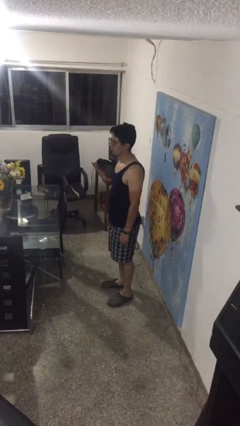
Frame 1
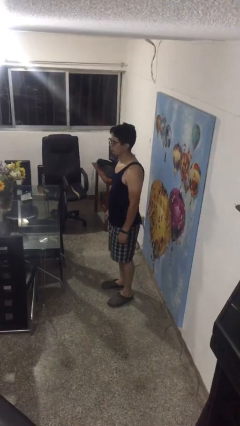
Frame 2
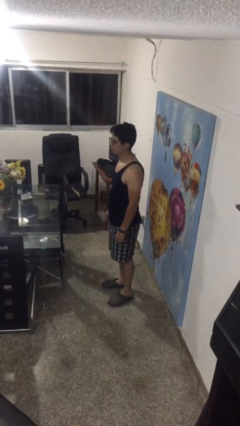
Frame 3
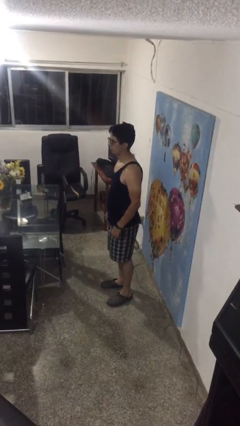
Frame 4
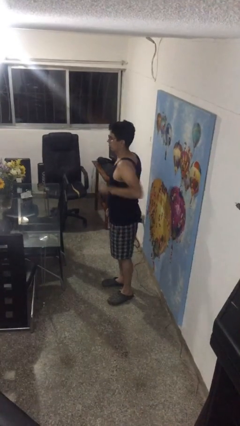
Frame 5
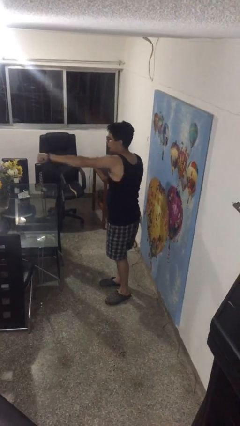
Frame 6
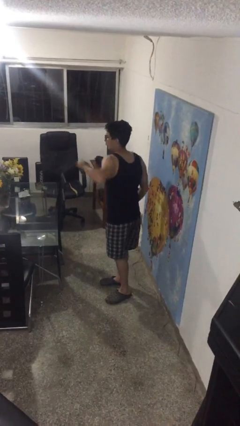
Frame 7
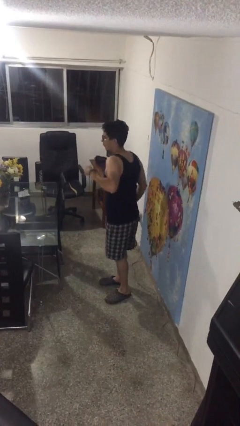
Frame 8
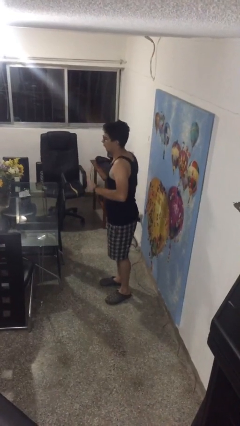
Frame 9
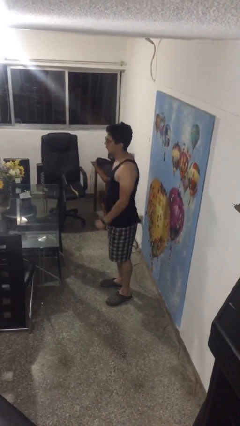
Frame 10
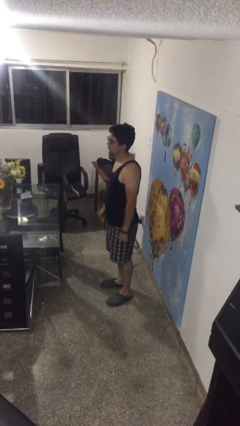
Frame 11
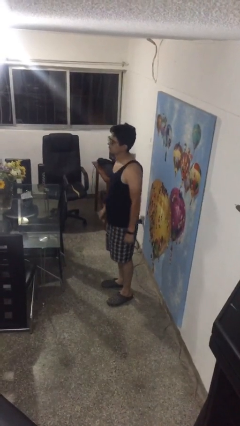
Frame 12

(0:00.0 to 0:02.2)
person punches

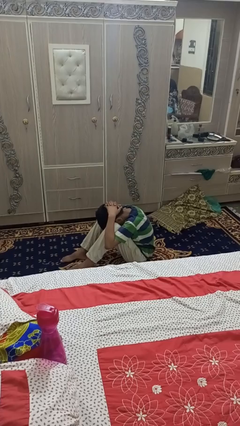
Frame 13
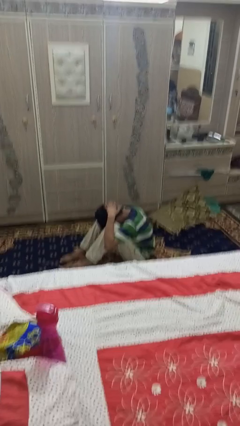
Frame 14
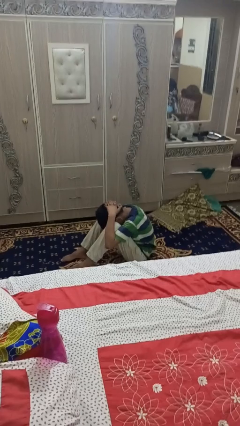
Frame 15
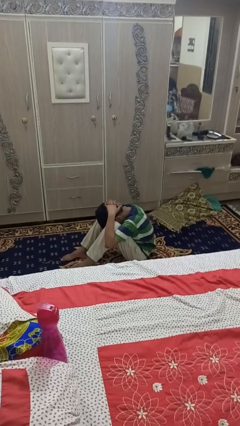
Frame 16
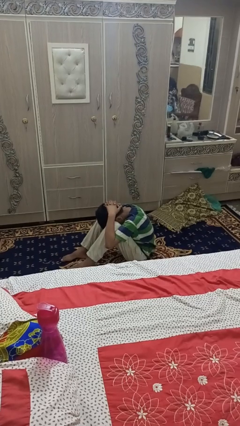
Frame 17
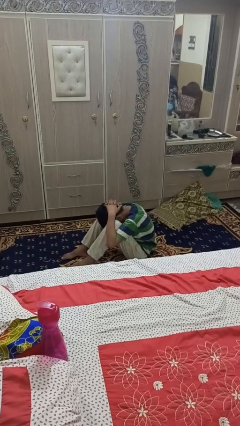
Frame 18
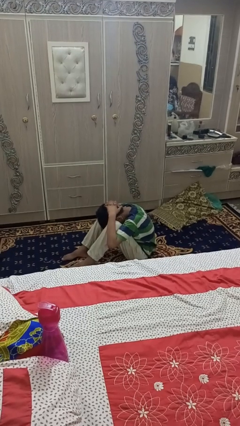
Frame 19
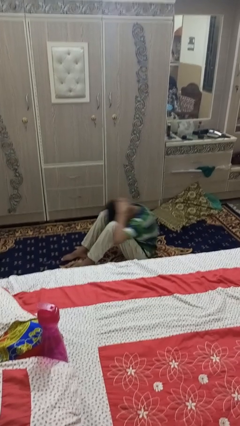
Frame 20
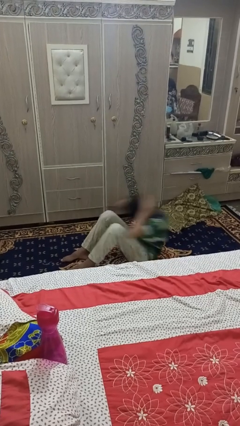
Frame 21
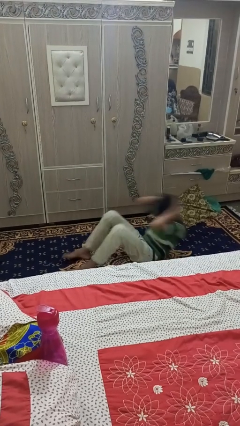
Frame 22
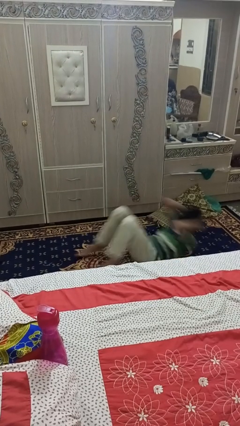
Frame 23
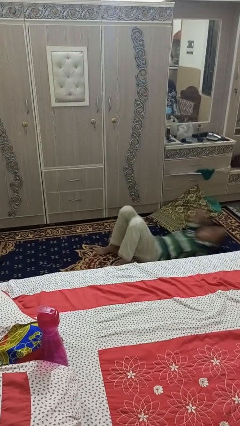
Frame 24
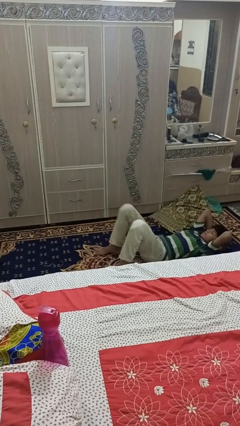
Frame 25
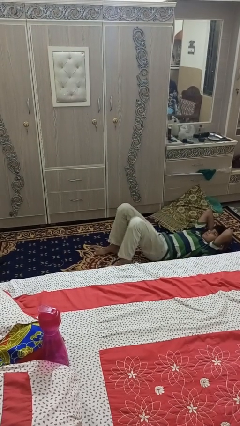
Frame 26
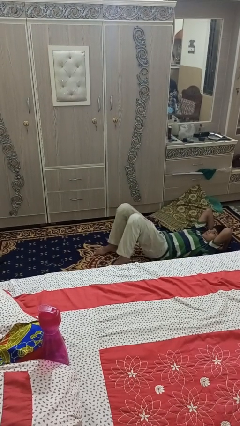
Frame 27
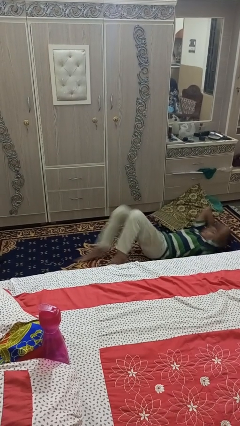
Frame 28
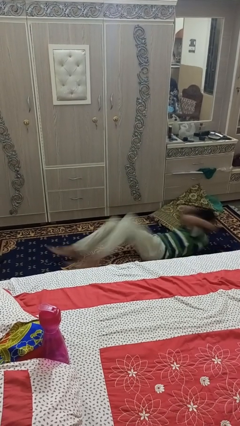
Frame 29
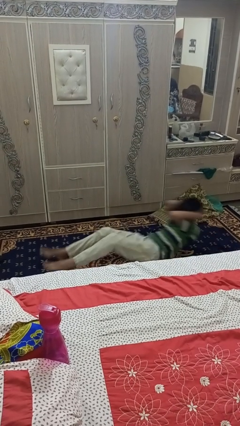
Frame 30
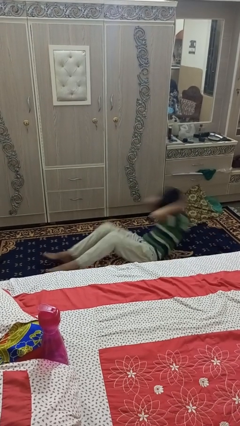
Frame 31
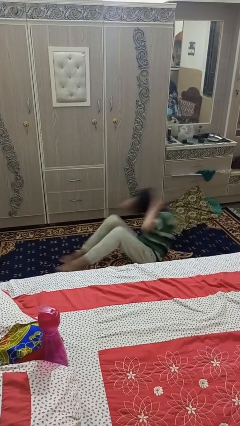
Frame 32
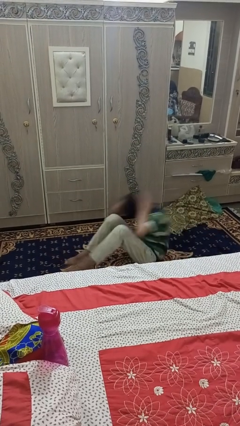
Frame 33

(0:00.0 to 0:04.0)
person exercises with situp

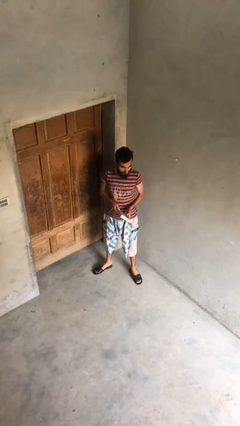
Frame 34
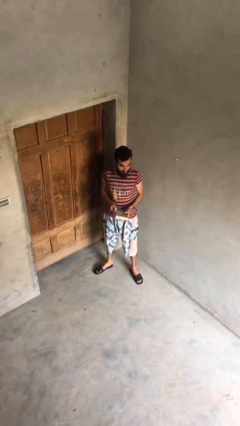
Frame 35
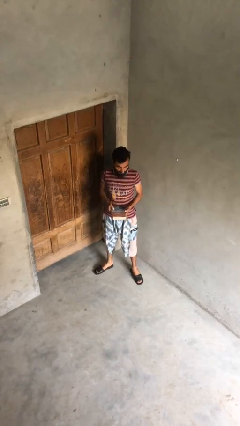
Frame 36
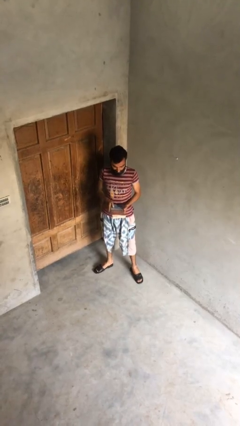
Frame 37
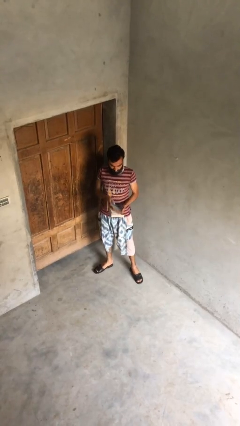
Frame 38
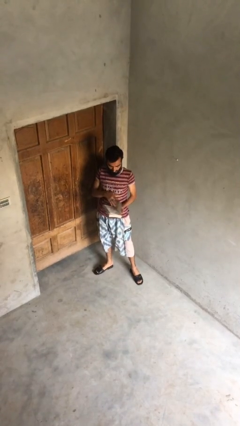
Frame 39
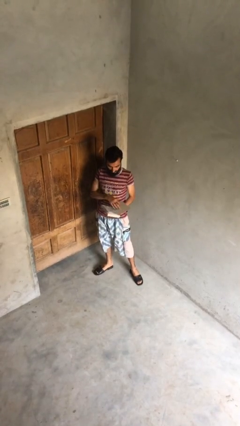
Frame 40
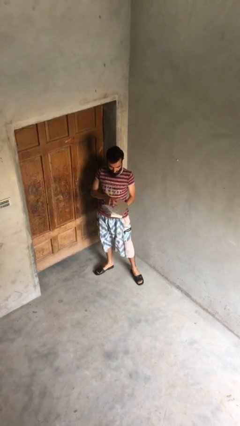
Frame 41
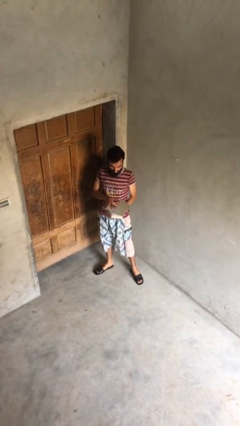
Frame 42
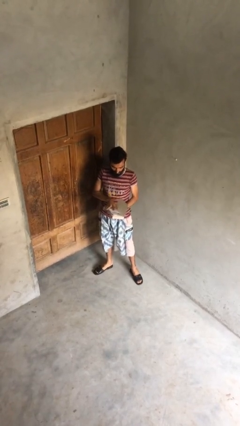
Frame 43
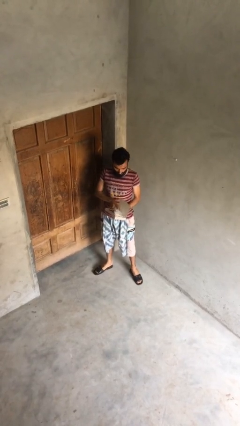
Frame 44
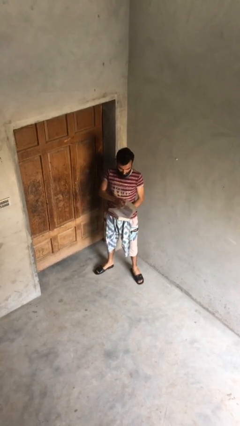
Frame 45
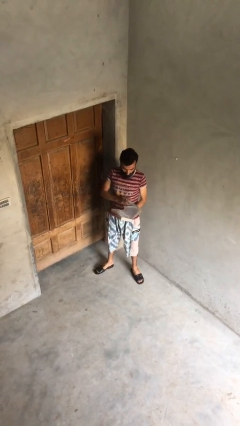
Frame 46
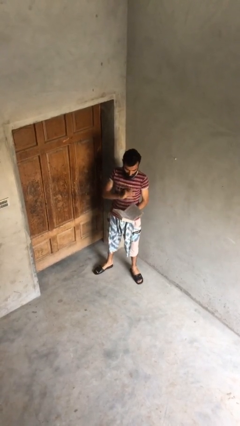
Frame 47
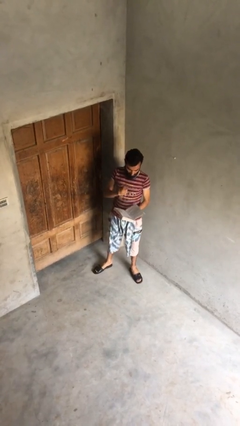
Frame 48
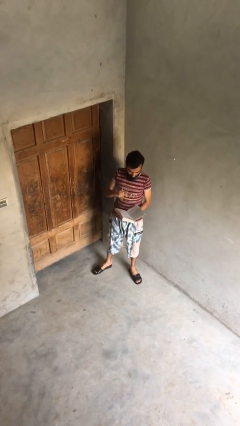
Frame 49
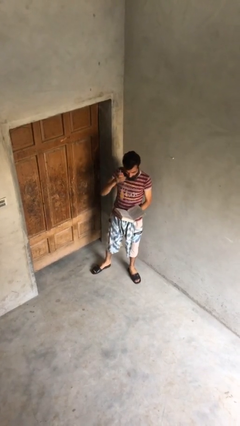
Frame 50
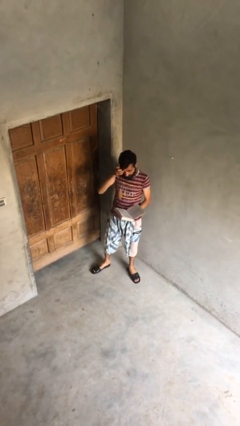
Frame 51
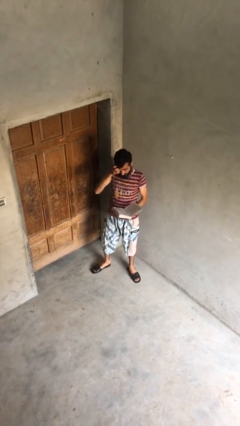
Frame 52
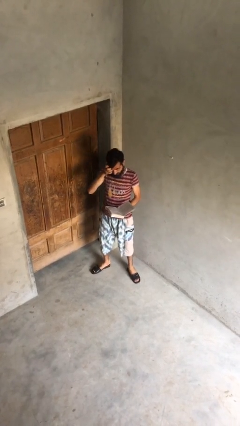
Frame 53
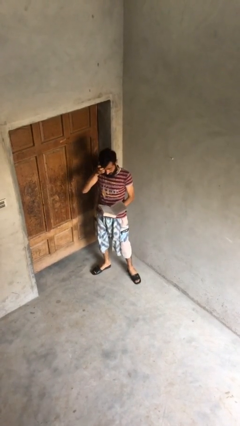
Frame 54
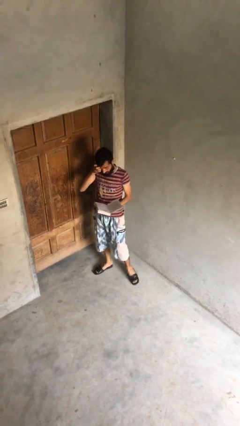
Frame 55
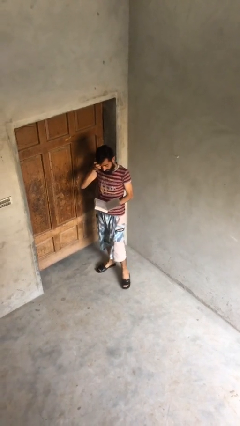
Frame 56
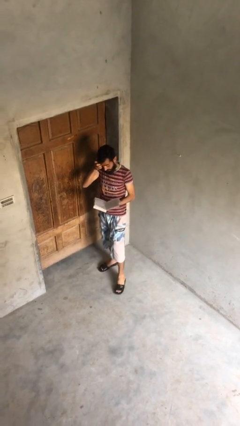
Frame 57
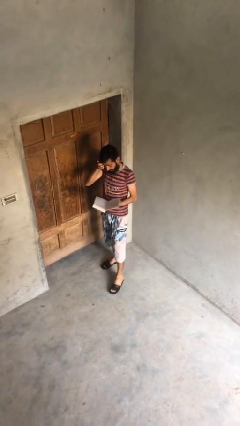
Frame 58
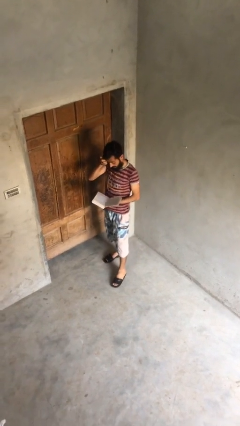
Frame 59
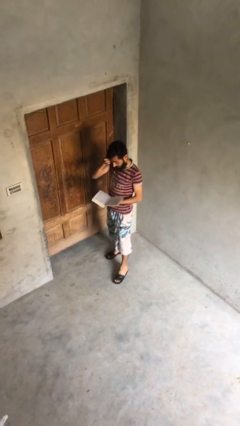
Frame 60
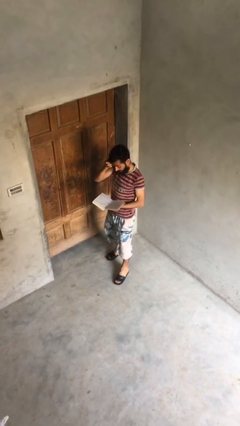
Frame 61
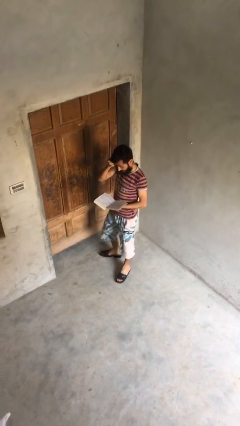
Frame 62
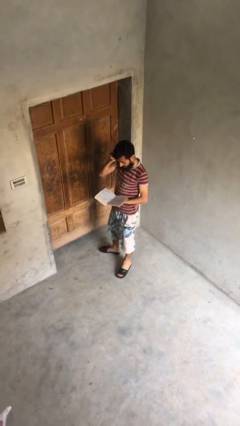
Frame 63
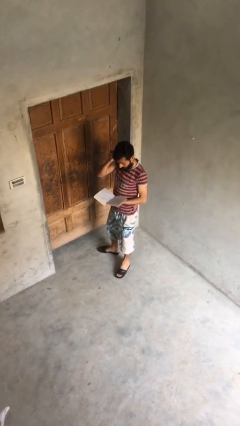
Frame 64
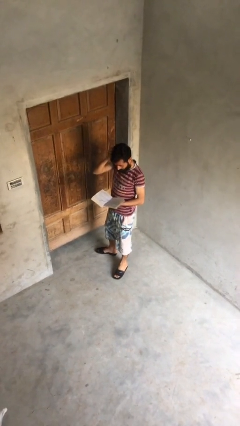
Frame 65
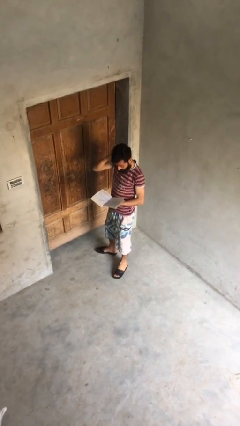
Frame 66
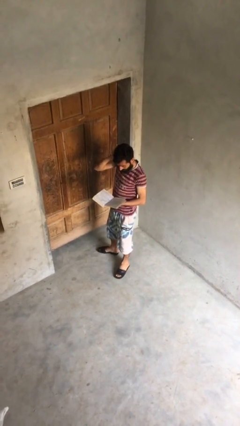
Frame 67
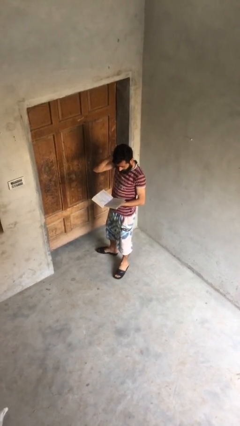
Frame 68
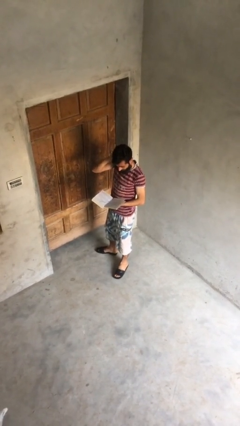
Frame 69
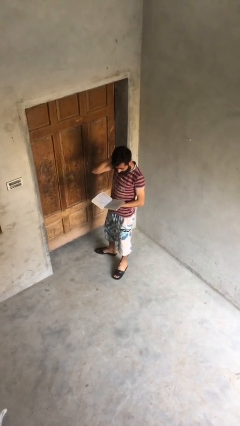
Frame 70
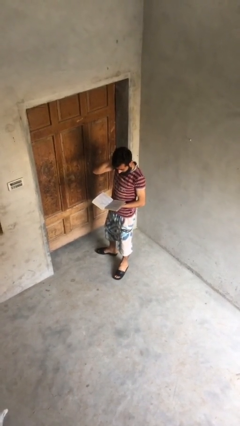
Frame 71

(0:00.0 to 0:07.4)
person reads document

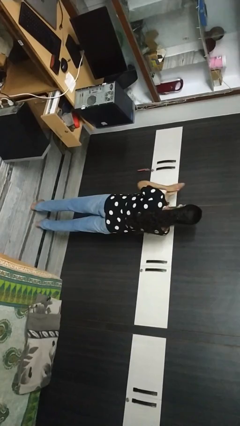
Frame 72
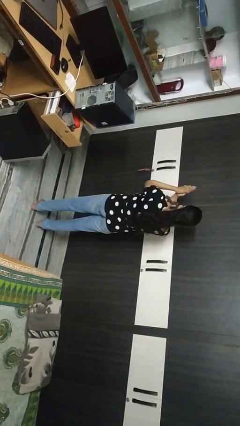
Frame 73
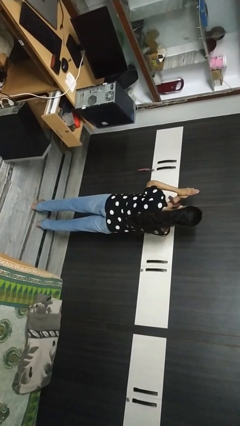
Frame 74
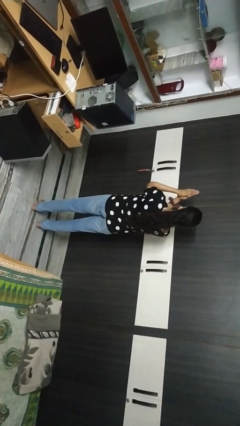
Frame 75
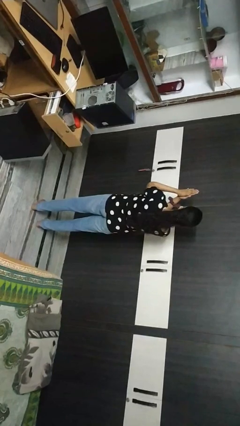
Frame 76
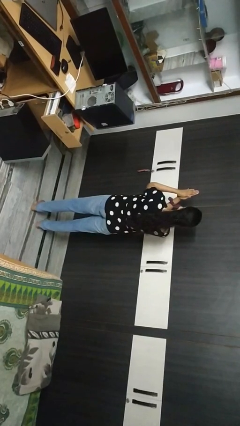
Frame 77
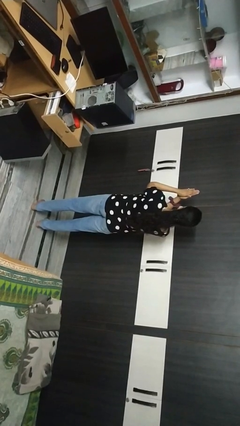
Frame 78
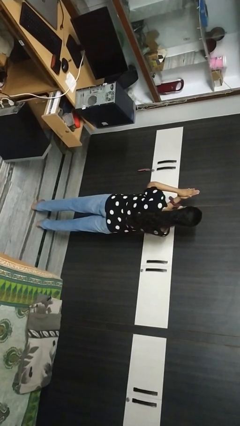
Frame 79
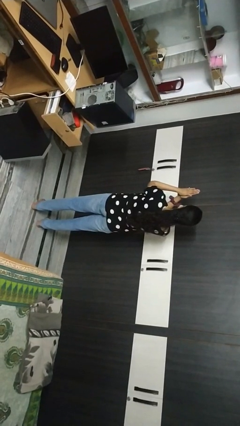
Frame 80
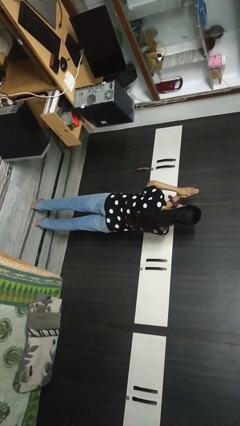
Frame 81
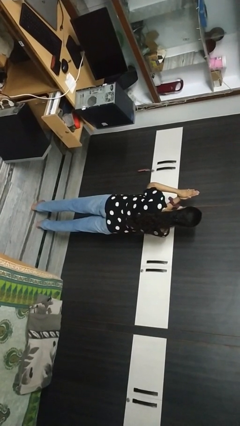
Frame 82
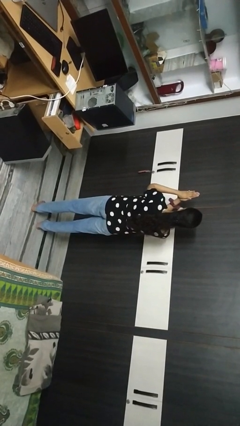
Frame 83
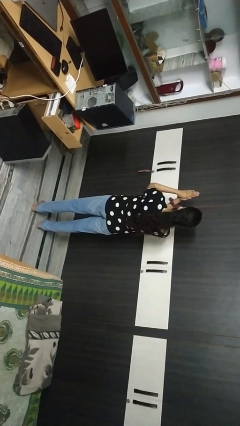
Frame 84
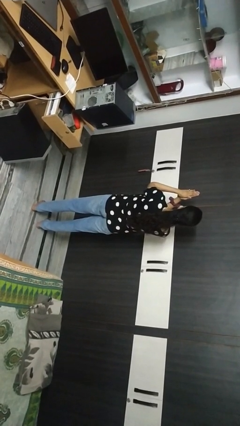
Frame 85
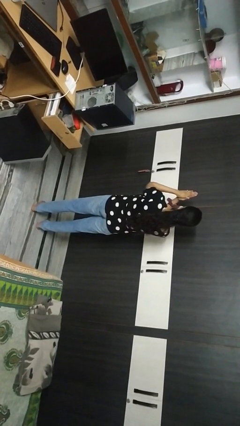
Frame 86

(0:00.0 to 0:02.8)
person prays

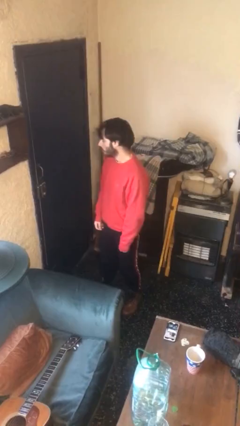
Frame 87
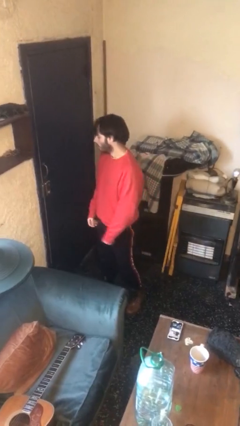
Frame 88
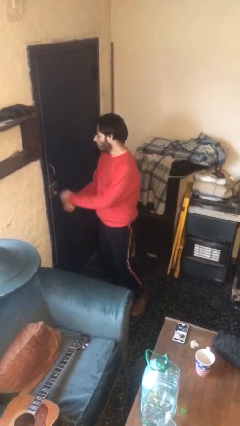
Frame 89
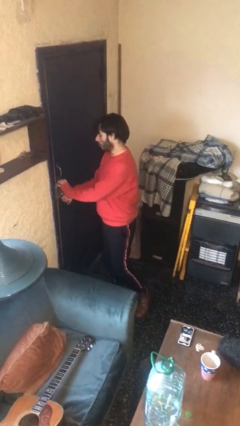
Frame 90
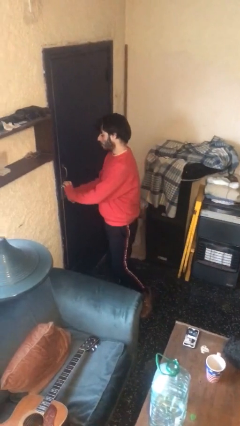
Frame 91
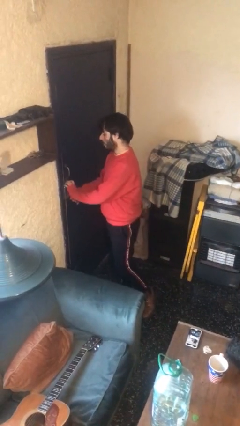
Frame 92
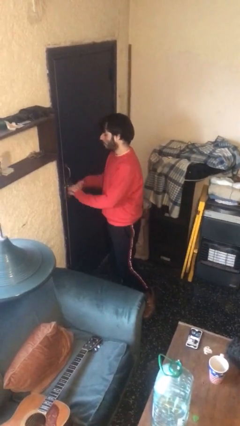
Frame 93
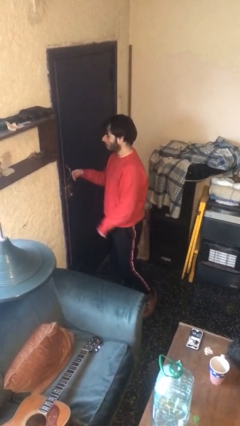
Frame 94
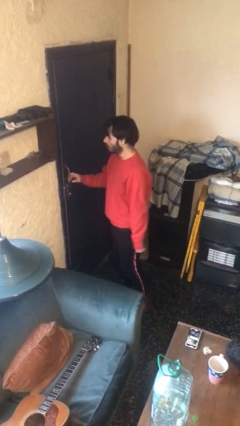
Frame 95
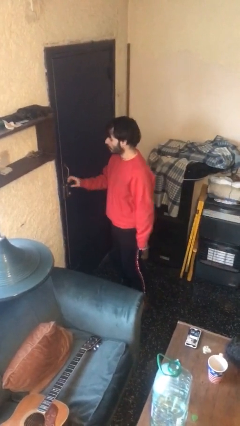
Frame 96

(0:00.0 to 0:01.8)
person unlocks door with keys
